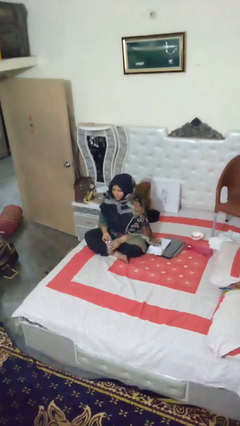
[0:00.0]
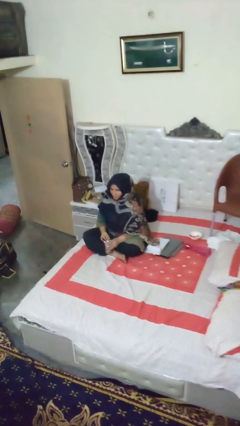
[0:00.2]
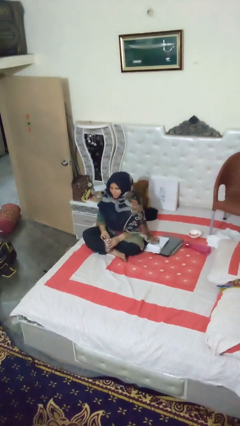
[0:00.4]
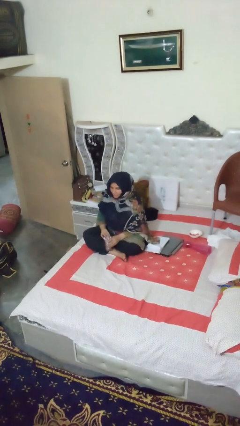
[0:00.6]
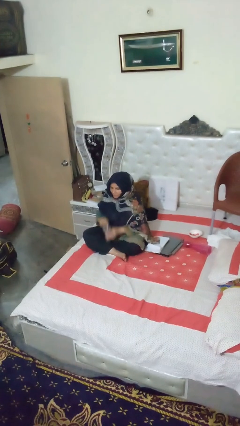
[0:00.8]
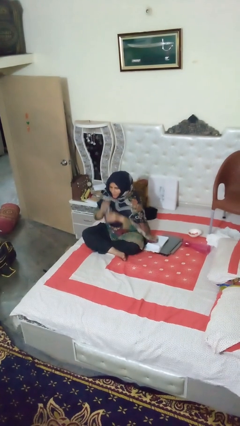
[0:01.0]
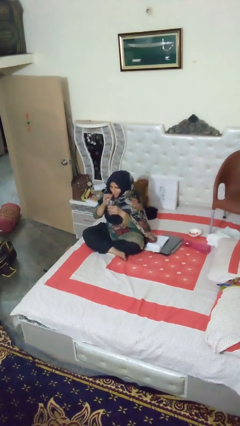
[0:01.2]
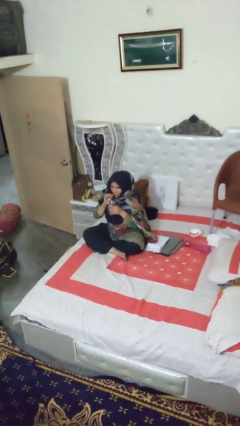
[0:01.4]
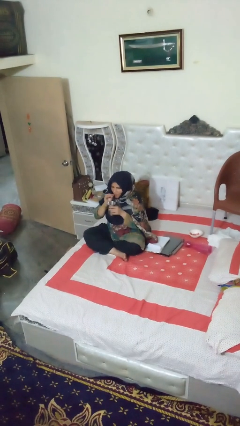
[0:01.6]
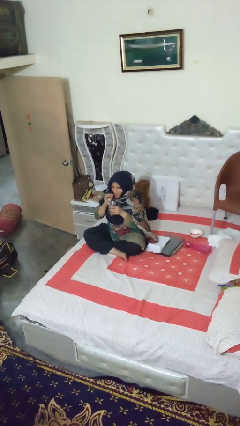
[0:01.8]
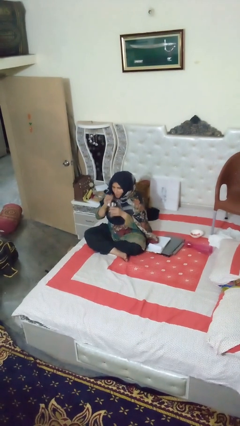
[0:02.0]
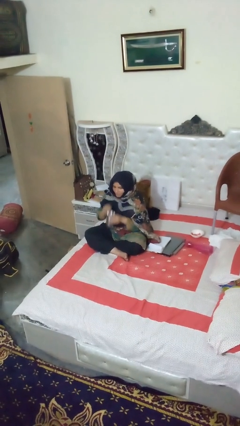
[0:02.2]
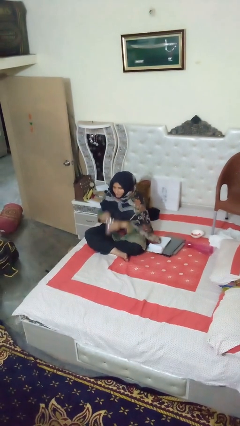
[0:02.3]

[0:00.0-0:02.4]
person drinks from straw

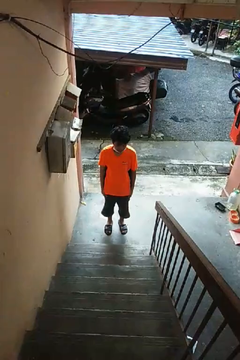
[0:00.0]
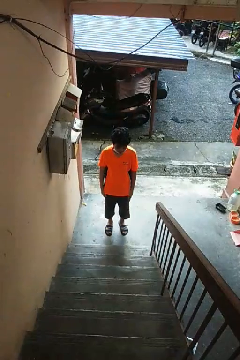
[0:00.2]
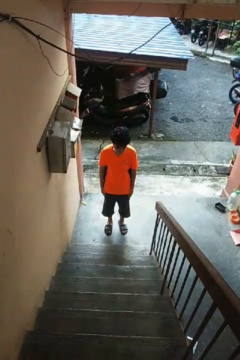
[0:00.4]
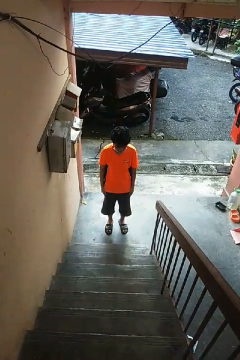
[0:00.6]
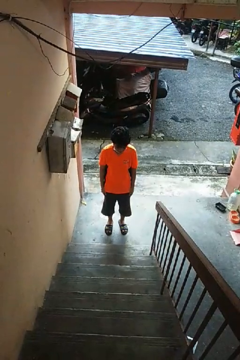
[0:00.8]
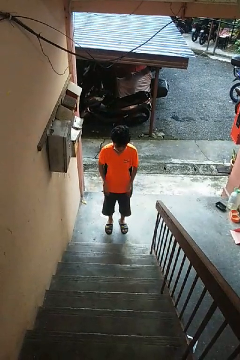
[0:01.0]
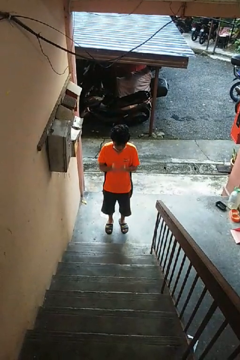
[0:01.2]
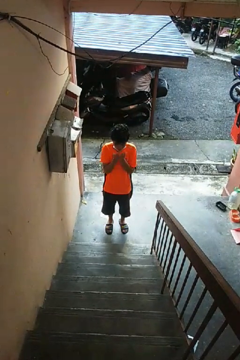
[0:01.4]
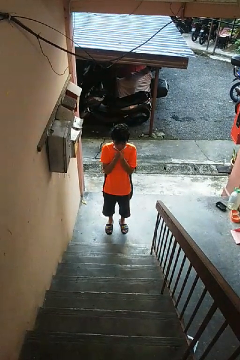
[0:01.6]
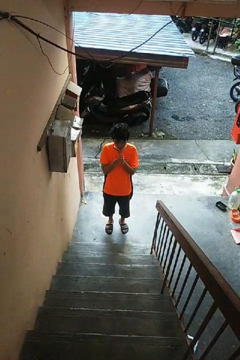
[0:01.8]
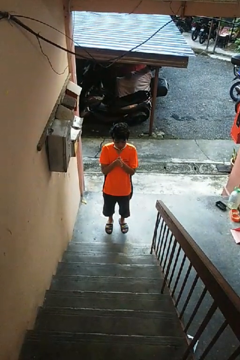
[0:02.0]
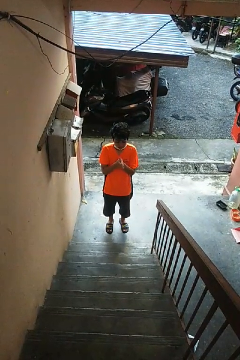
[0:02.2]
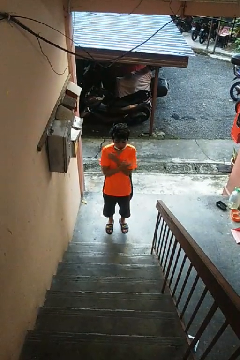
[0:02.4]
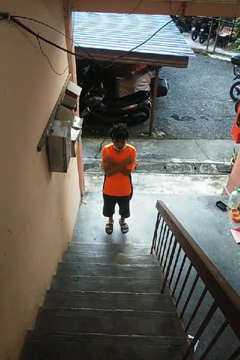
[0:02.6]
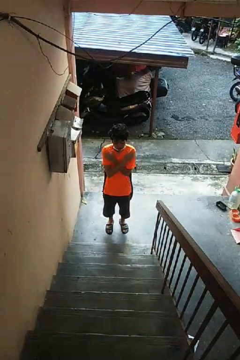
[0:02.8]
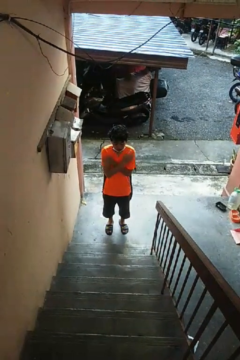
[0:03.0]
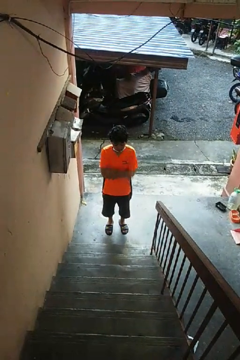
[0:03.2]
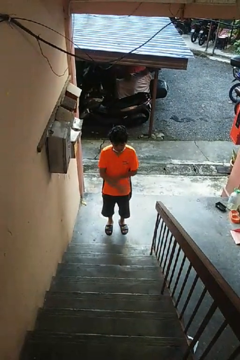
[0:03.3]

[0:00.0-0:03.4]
person blows into hands

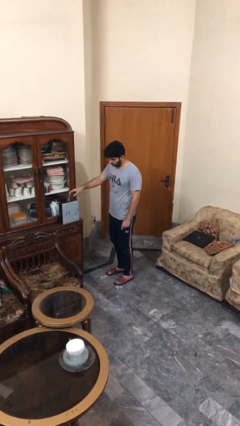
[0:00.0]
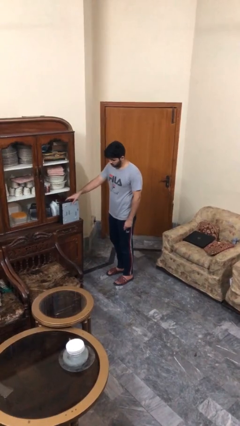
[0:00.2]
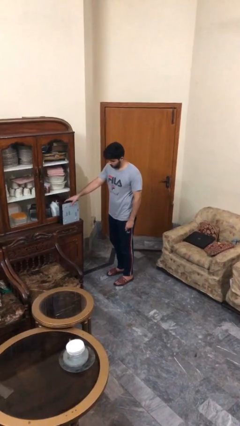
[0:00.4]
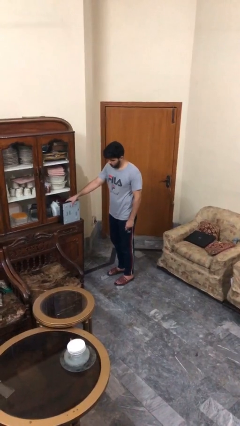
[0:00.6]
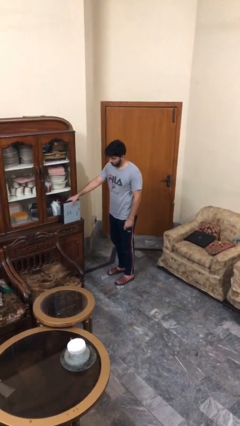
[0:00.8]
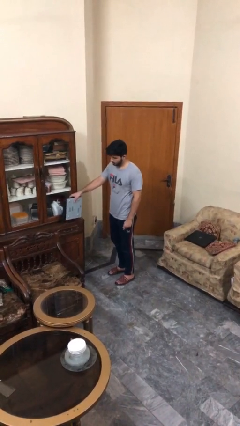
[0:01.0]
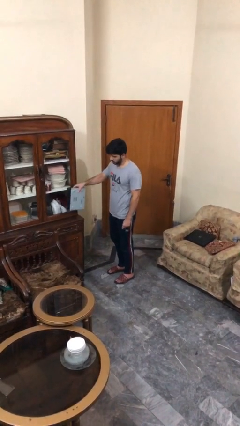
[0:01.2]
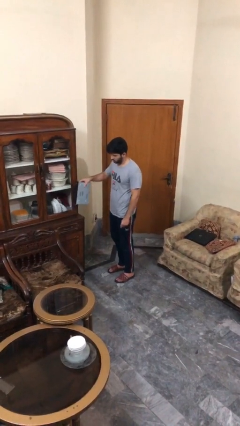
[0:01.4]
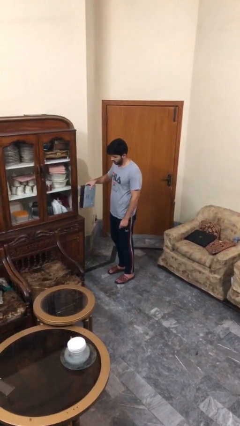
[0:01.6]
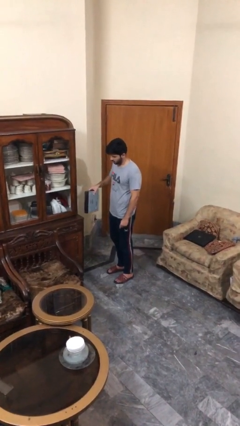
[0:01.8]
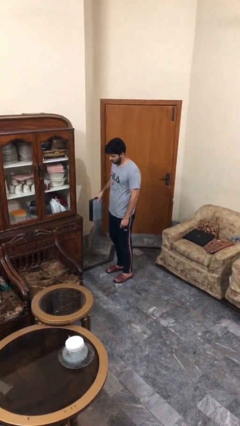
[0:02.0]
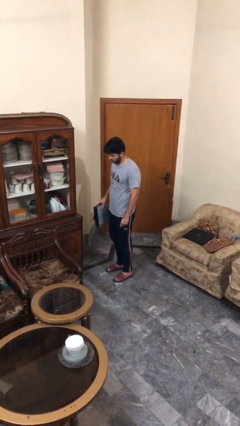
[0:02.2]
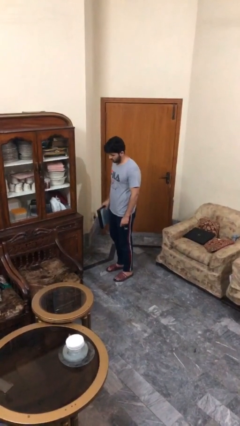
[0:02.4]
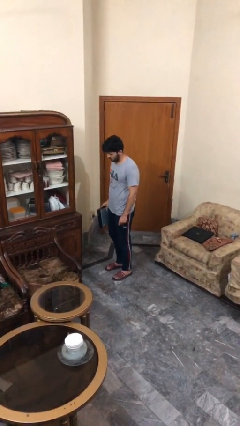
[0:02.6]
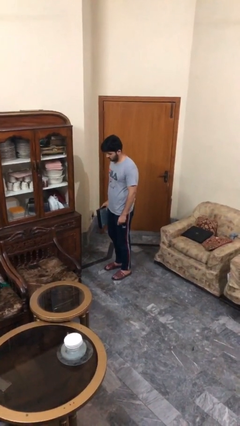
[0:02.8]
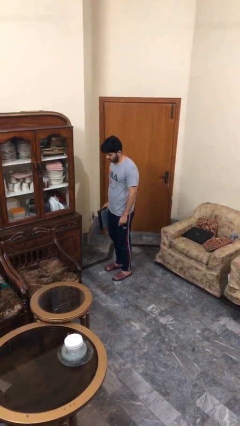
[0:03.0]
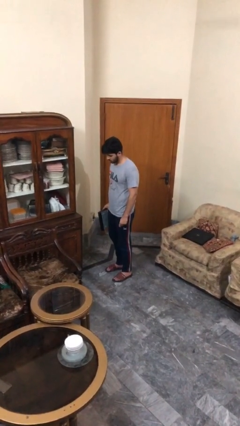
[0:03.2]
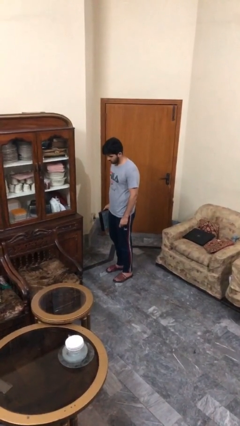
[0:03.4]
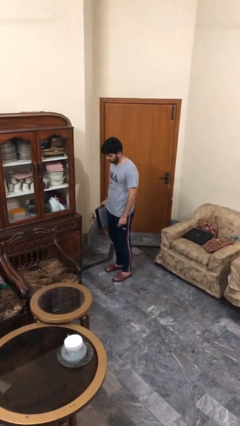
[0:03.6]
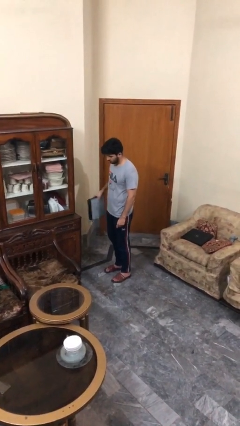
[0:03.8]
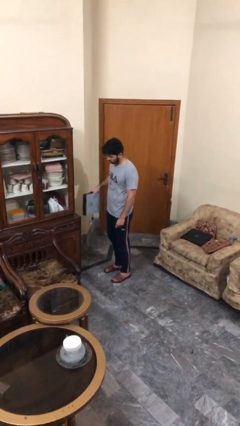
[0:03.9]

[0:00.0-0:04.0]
person picks up object from countertop

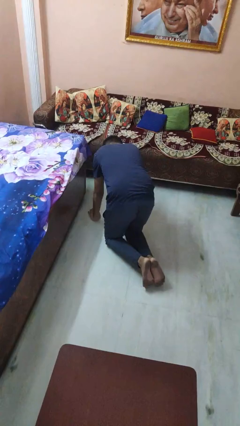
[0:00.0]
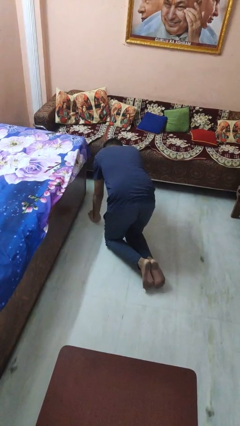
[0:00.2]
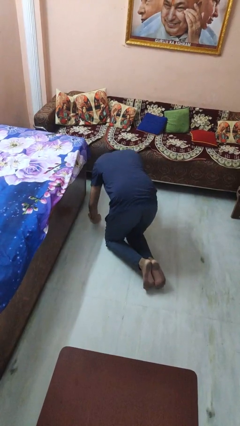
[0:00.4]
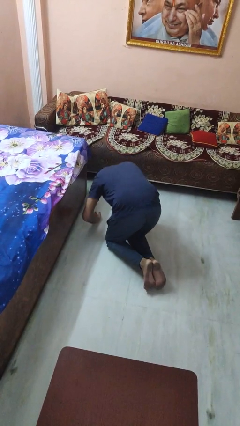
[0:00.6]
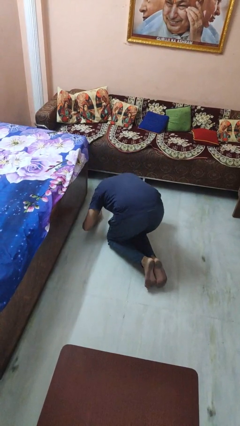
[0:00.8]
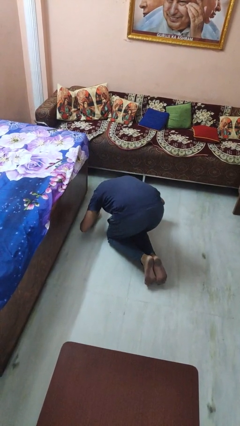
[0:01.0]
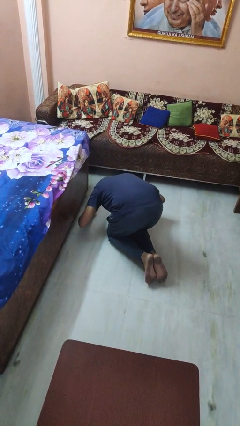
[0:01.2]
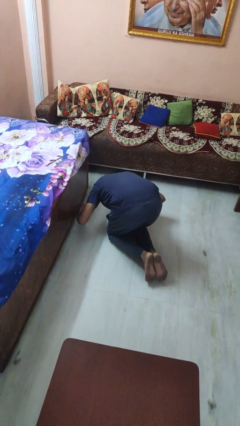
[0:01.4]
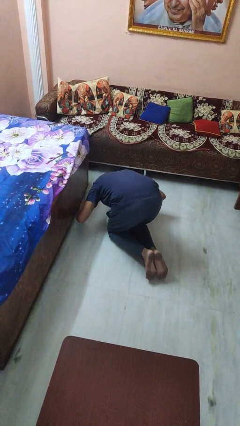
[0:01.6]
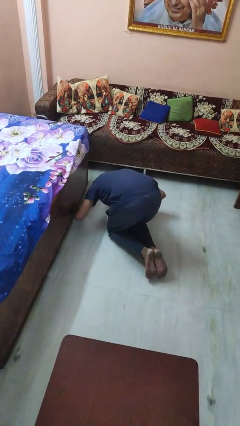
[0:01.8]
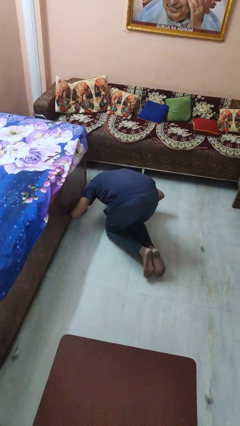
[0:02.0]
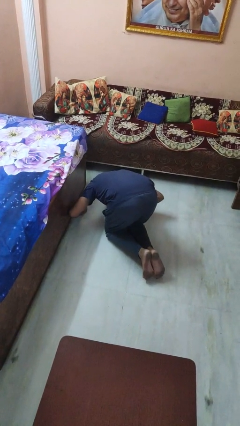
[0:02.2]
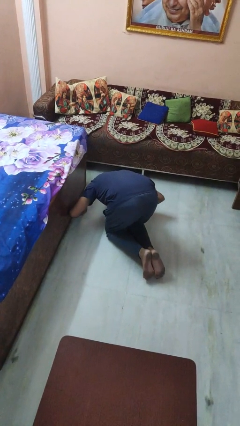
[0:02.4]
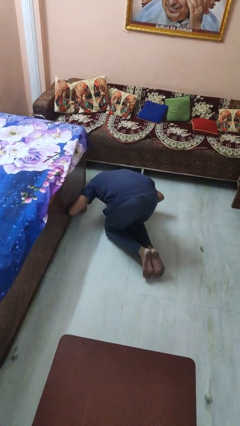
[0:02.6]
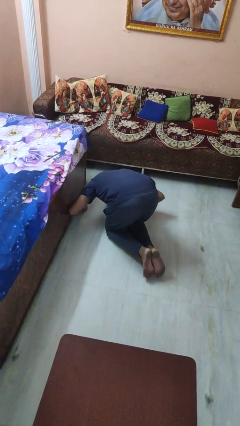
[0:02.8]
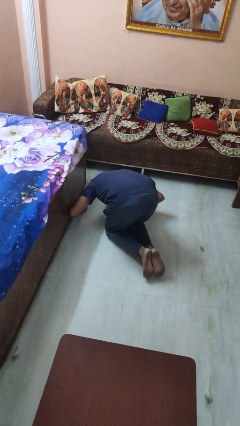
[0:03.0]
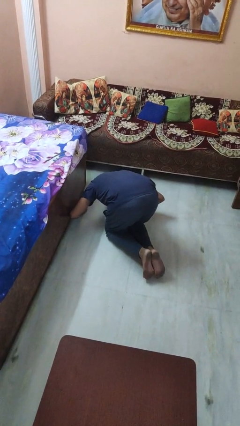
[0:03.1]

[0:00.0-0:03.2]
person searches under bed

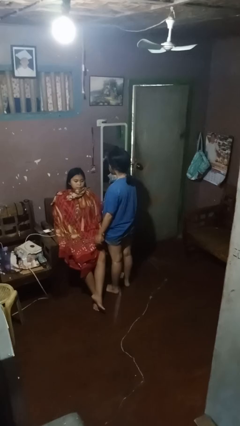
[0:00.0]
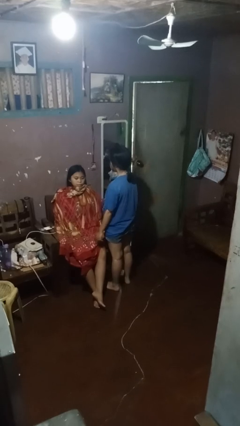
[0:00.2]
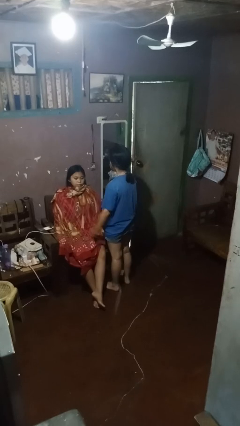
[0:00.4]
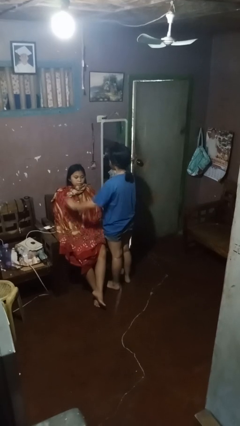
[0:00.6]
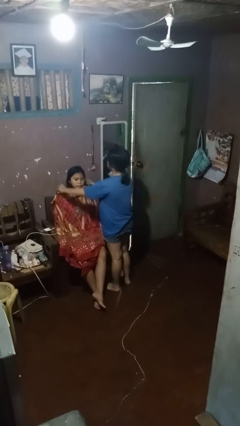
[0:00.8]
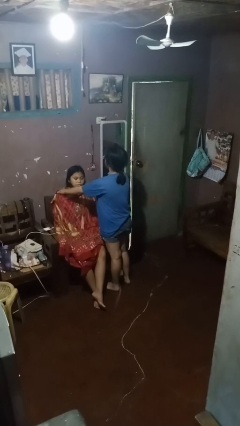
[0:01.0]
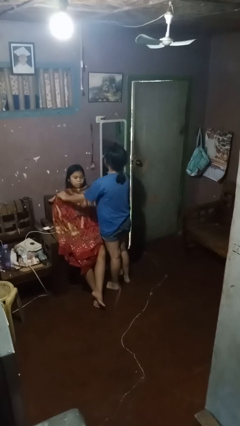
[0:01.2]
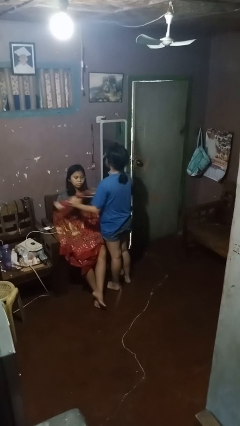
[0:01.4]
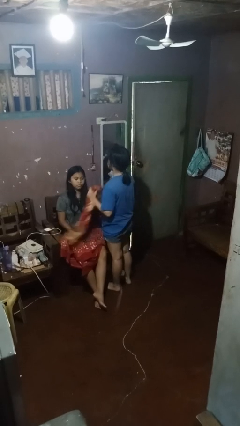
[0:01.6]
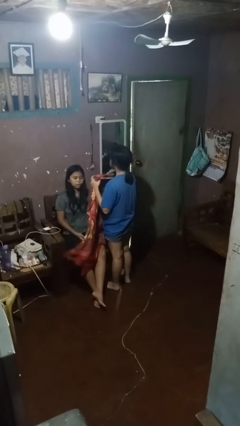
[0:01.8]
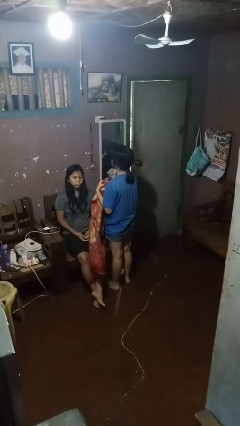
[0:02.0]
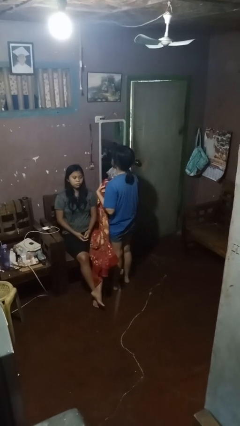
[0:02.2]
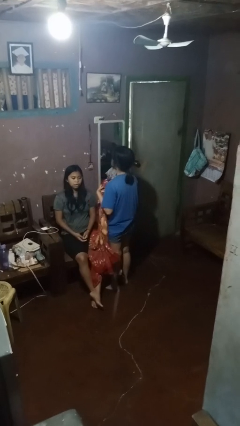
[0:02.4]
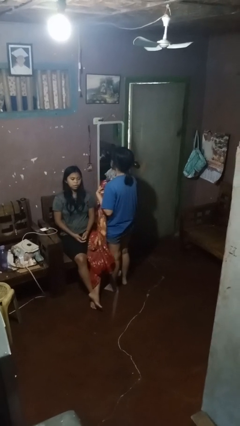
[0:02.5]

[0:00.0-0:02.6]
person uncovers friend with blanket

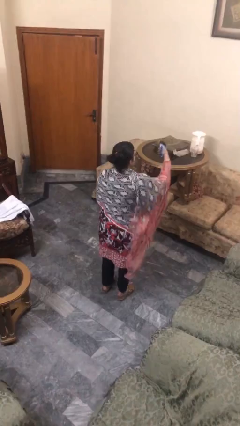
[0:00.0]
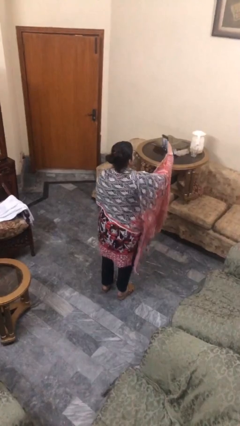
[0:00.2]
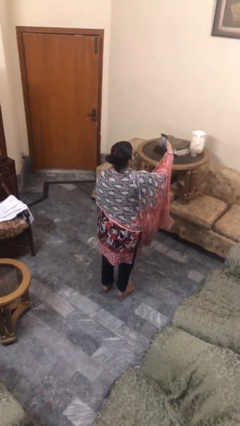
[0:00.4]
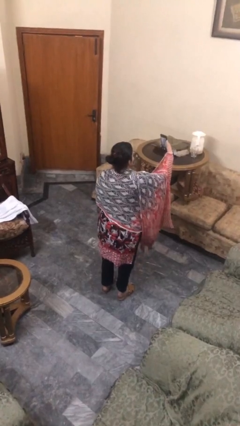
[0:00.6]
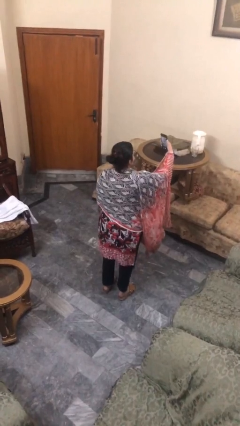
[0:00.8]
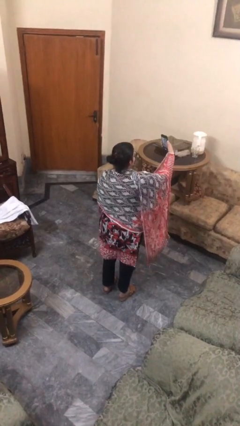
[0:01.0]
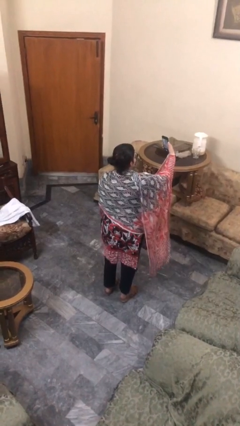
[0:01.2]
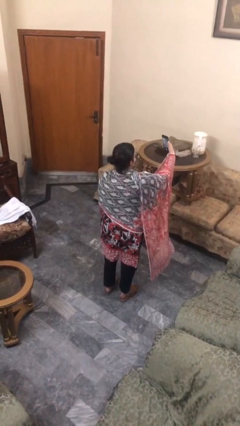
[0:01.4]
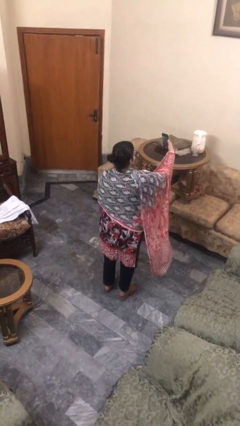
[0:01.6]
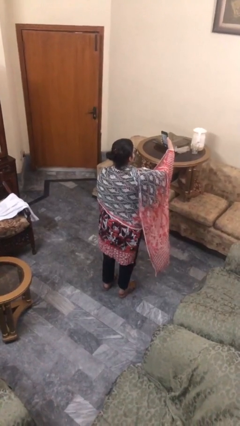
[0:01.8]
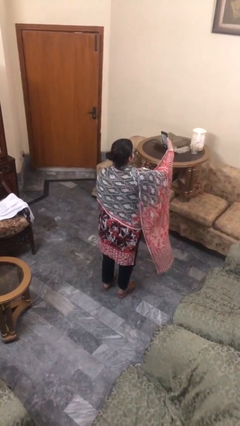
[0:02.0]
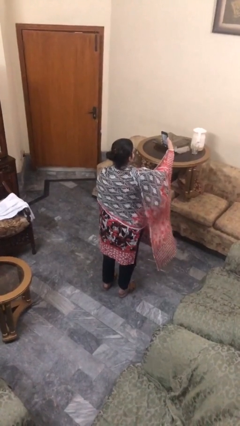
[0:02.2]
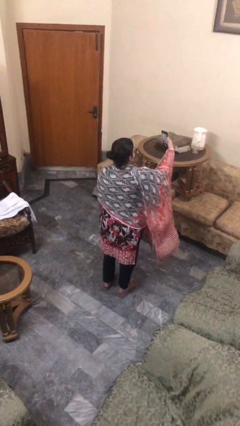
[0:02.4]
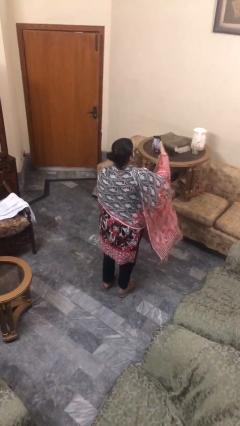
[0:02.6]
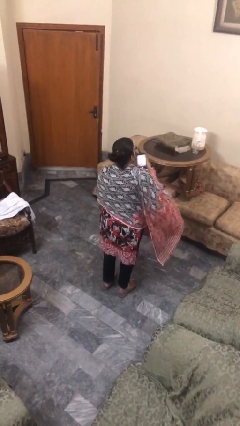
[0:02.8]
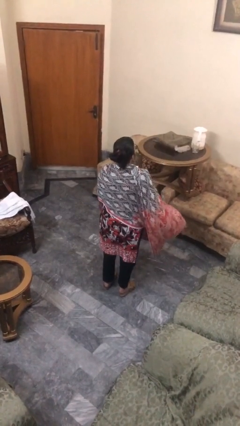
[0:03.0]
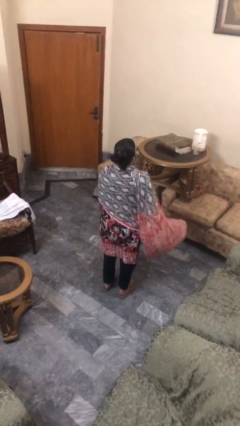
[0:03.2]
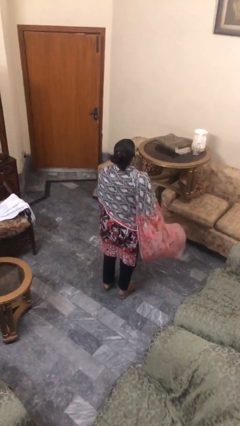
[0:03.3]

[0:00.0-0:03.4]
person takes selfie
